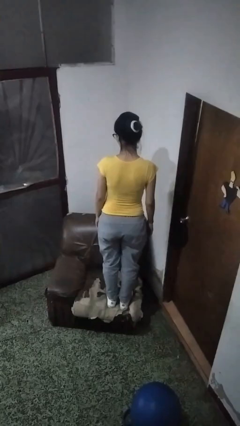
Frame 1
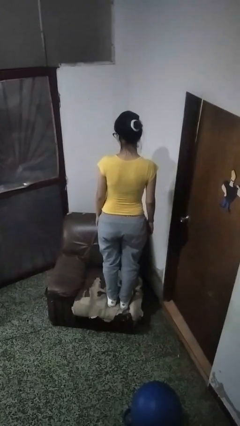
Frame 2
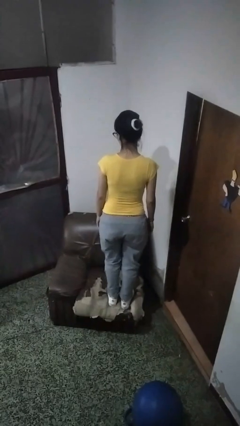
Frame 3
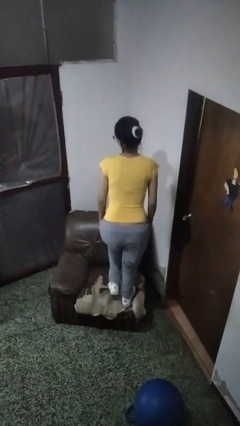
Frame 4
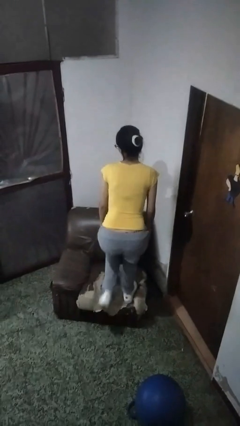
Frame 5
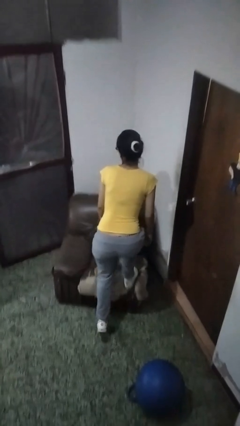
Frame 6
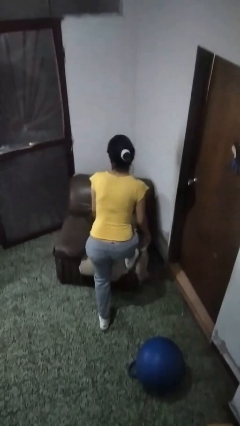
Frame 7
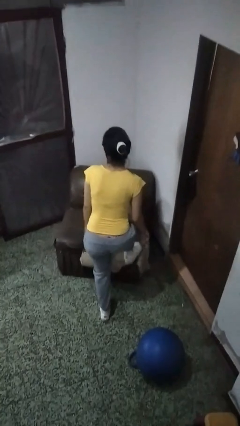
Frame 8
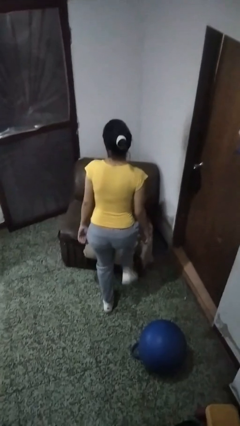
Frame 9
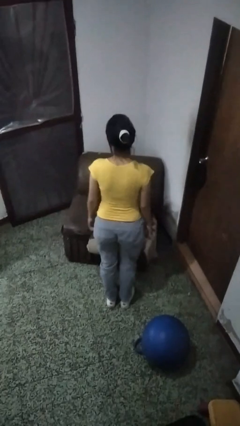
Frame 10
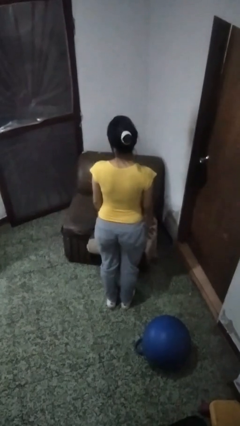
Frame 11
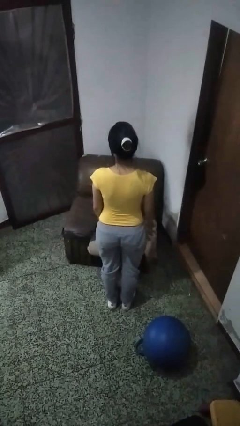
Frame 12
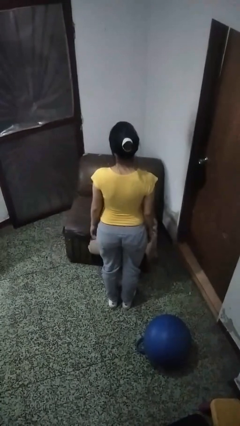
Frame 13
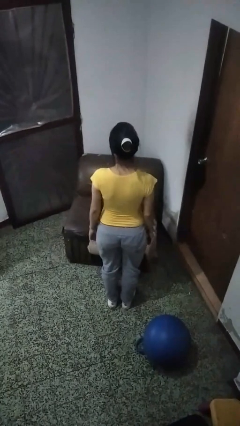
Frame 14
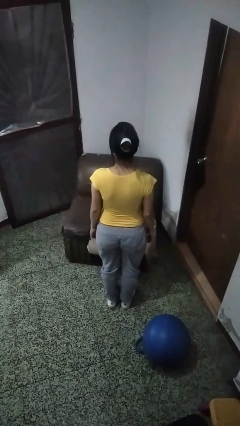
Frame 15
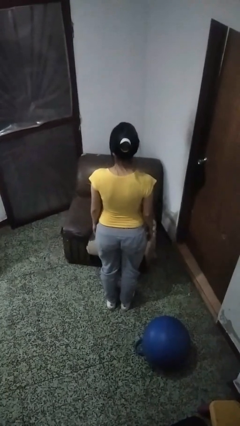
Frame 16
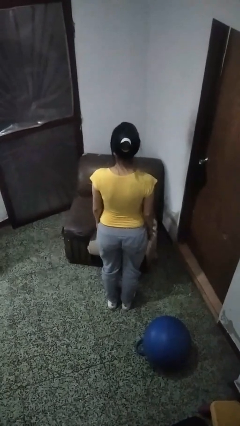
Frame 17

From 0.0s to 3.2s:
person climbs off couch

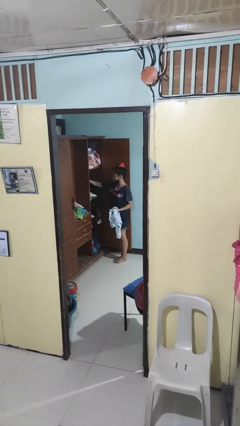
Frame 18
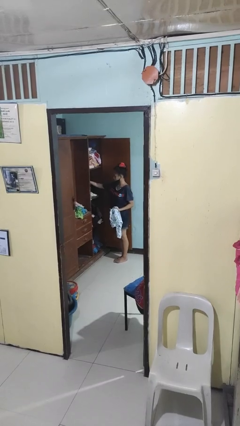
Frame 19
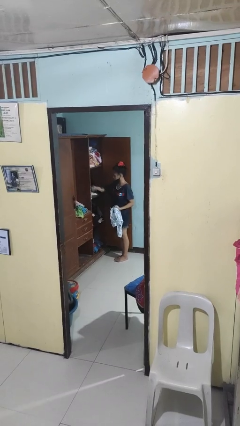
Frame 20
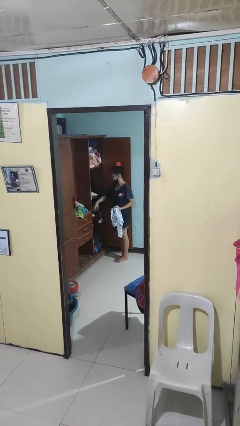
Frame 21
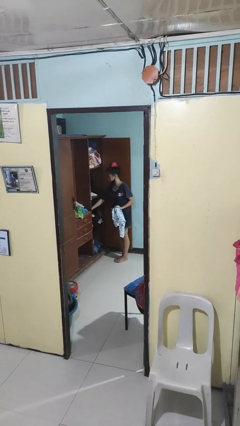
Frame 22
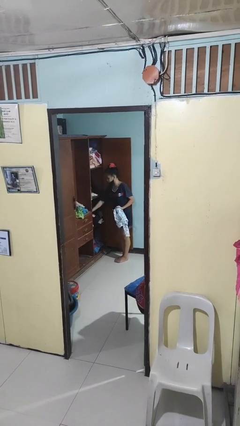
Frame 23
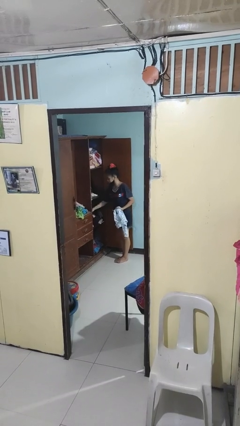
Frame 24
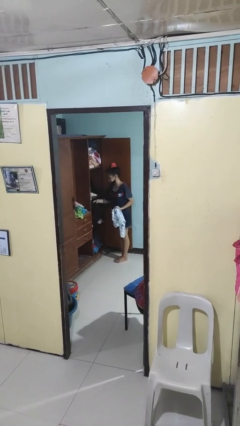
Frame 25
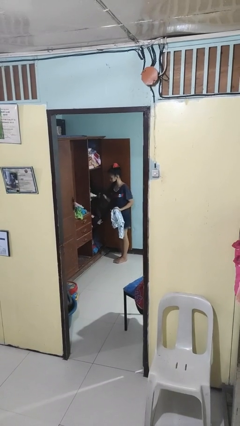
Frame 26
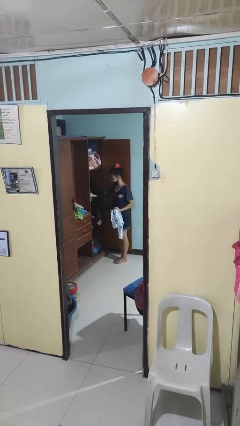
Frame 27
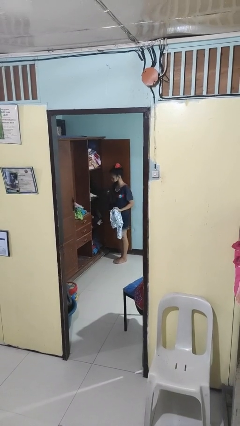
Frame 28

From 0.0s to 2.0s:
person takes clothes from dresser

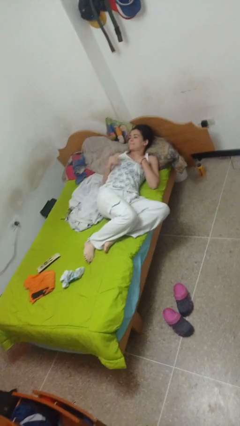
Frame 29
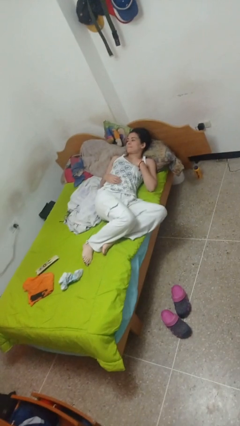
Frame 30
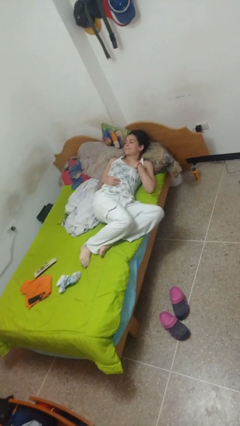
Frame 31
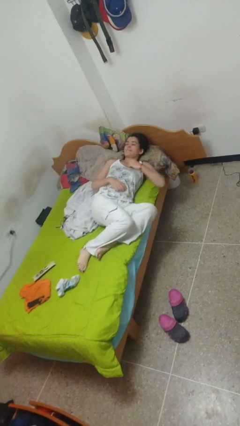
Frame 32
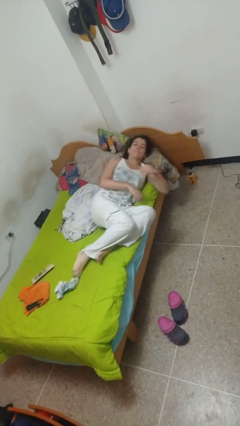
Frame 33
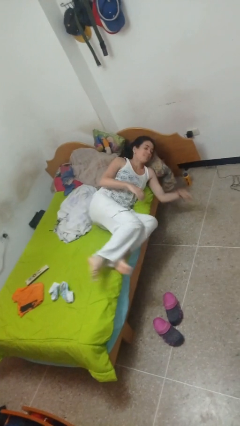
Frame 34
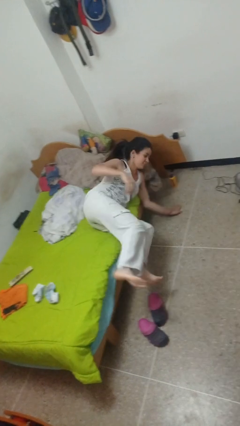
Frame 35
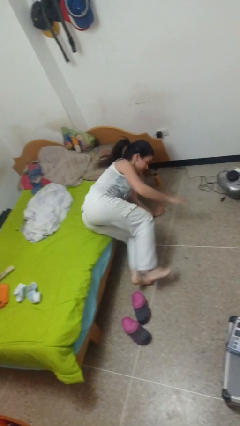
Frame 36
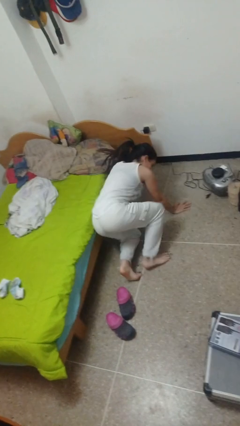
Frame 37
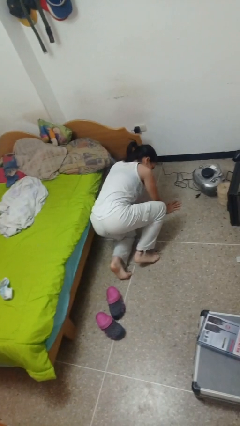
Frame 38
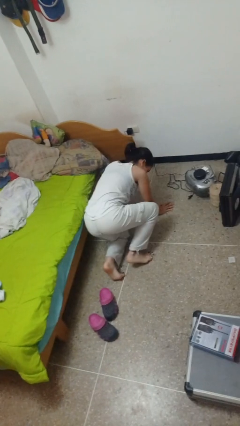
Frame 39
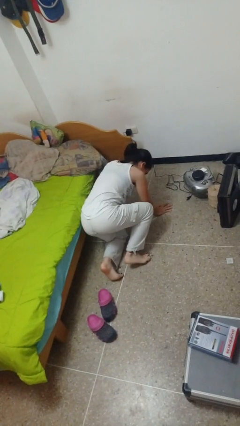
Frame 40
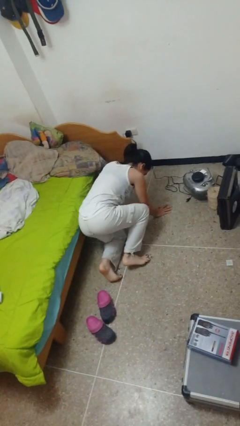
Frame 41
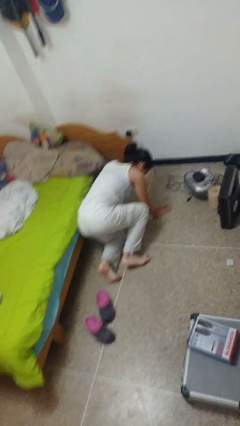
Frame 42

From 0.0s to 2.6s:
person falls from bed

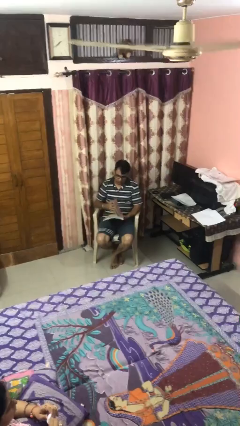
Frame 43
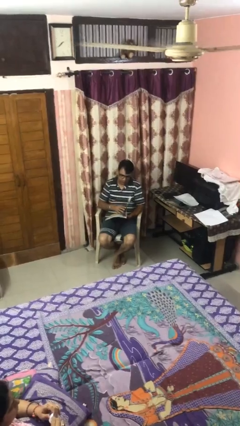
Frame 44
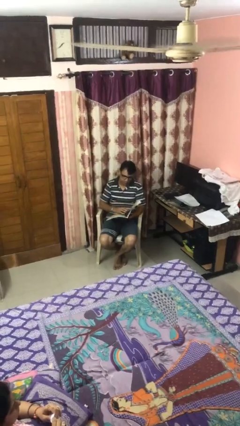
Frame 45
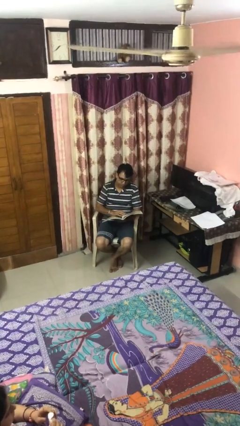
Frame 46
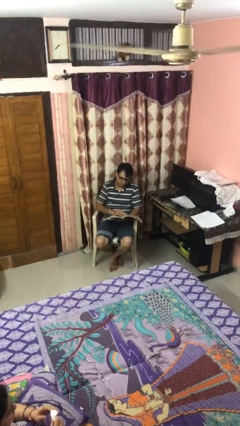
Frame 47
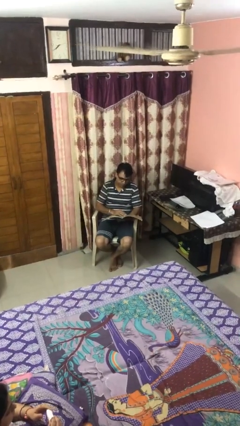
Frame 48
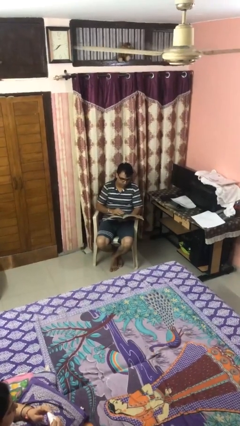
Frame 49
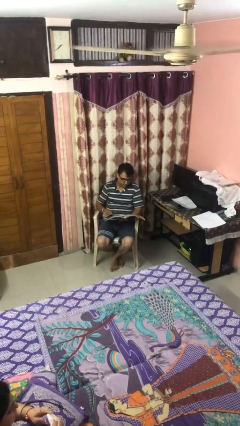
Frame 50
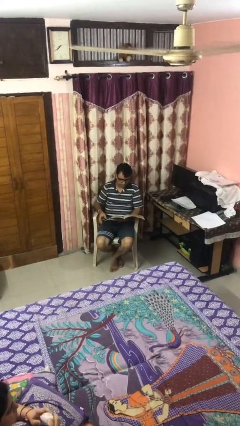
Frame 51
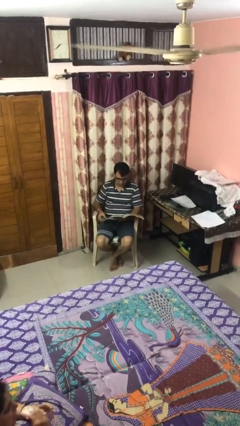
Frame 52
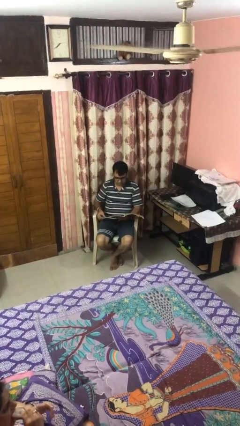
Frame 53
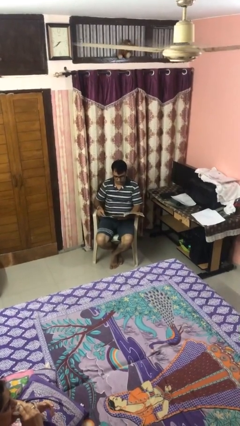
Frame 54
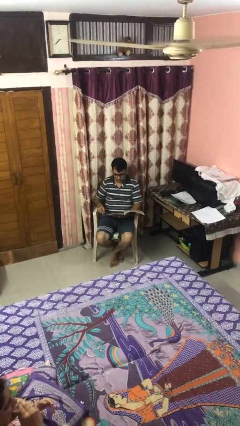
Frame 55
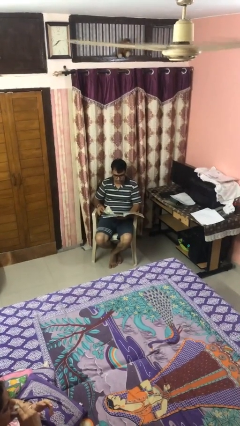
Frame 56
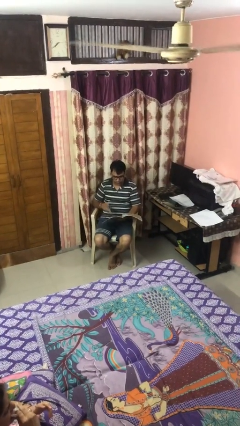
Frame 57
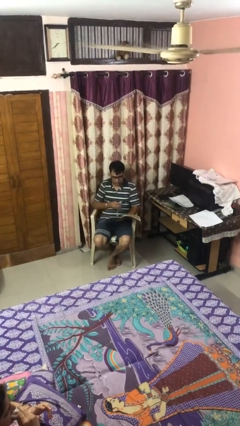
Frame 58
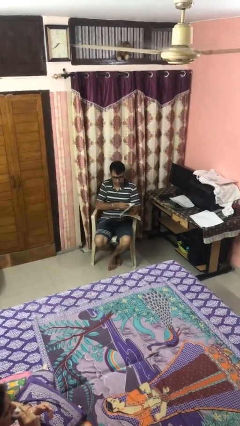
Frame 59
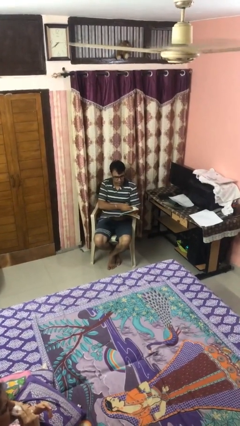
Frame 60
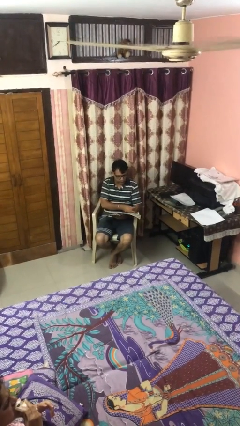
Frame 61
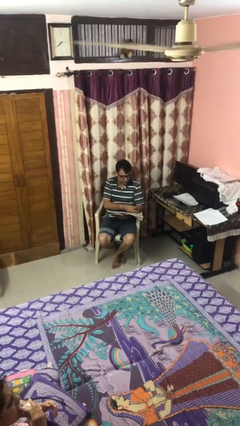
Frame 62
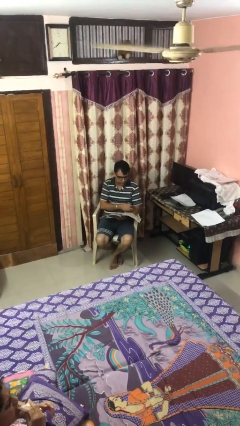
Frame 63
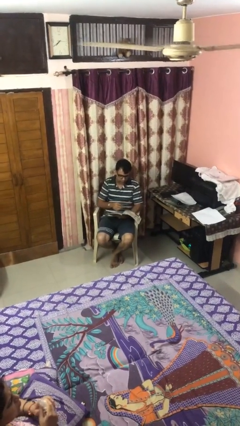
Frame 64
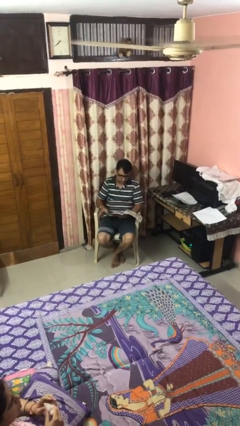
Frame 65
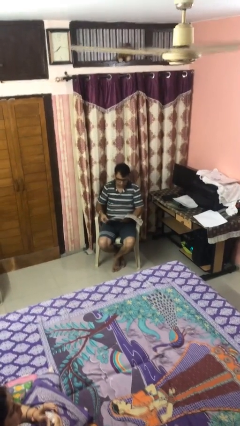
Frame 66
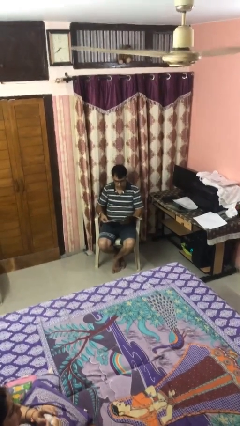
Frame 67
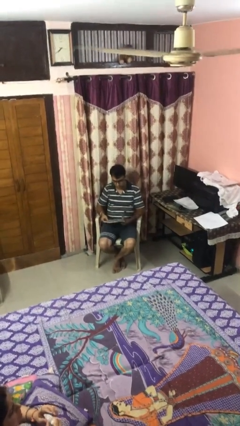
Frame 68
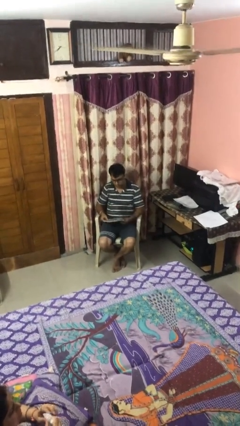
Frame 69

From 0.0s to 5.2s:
person reads magazine

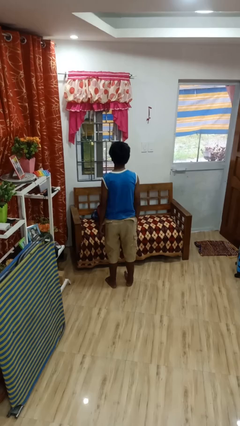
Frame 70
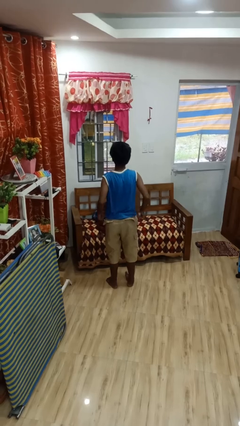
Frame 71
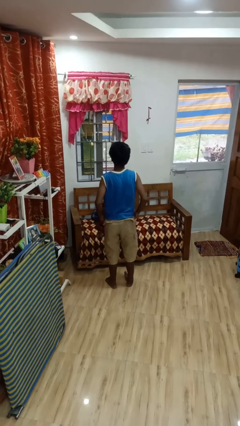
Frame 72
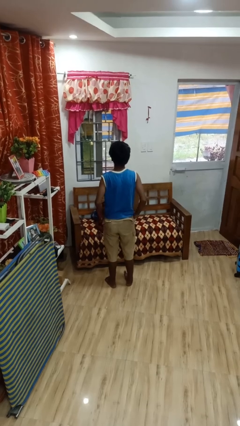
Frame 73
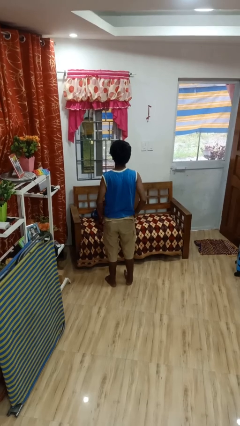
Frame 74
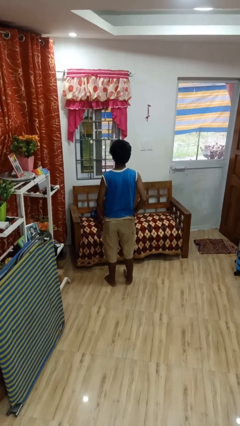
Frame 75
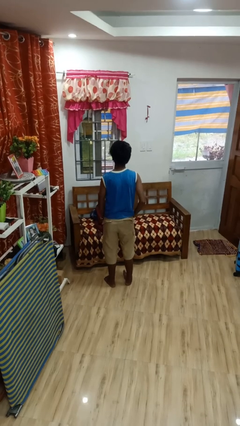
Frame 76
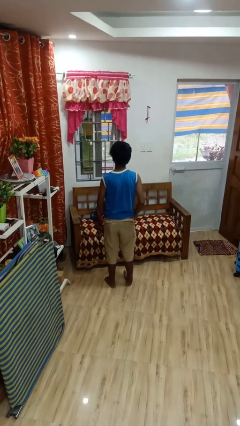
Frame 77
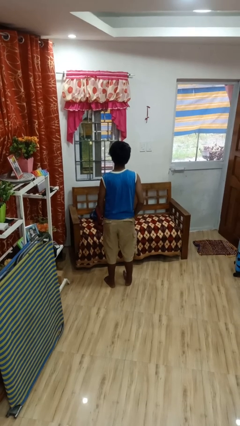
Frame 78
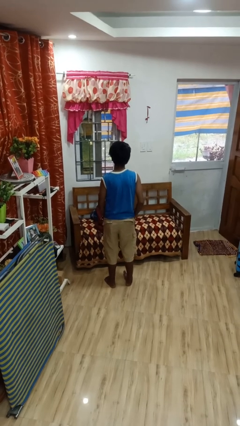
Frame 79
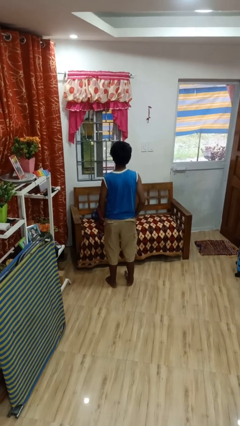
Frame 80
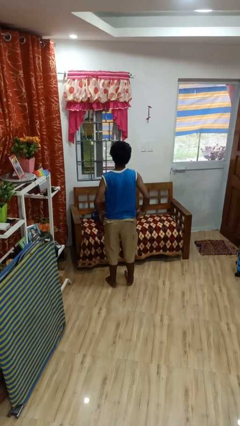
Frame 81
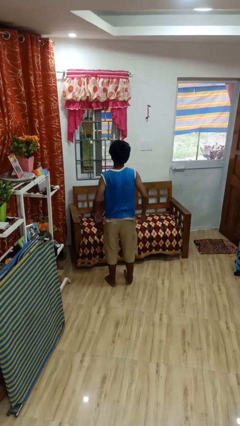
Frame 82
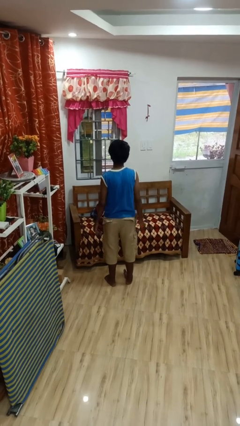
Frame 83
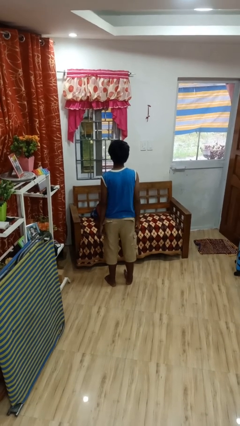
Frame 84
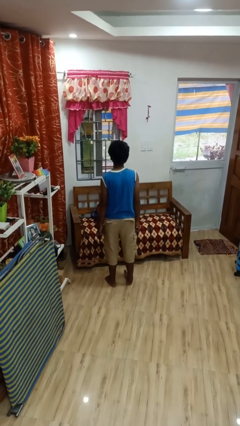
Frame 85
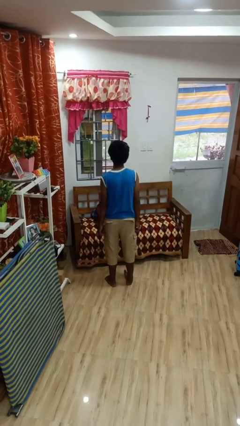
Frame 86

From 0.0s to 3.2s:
person puts hands in back pockets

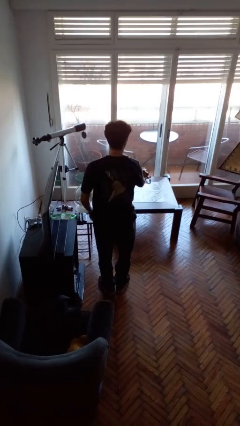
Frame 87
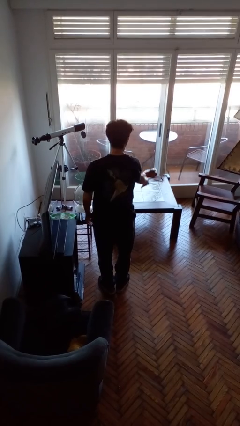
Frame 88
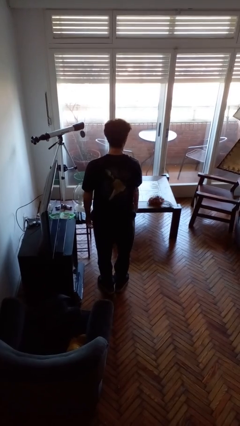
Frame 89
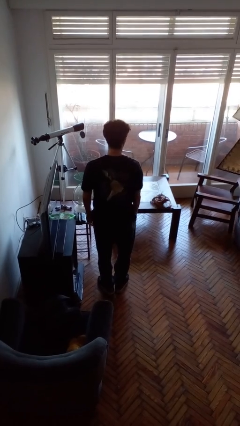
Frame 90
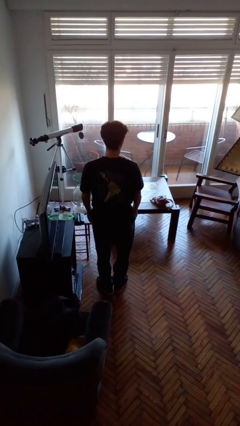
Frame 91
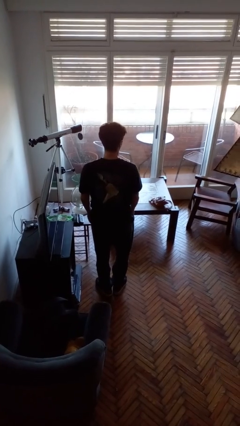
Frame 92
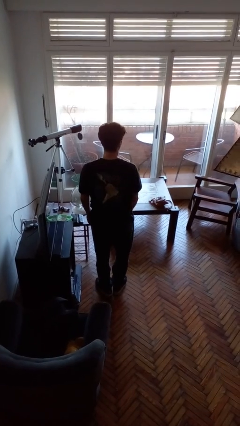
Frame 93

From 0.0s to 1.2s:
person throws object on table
